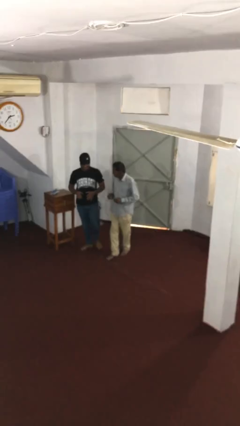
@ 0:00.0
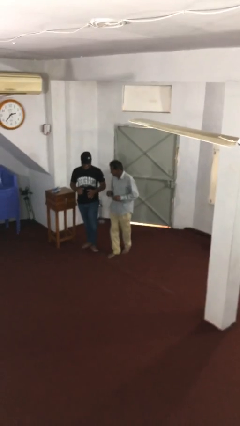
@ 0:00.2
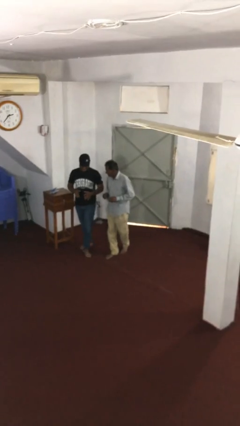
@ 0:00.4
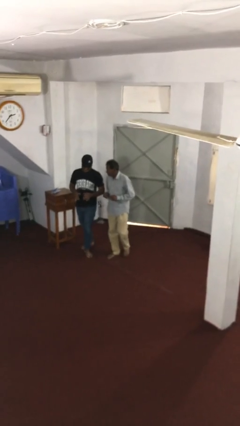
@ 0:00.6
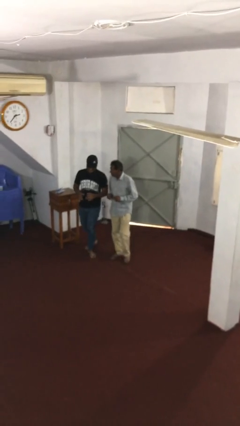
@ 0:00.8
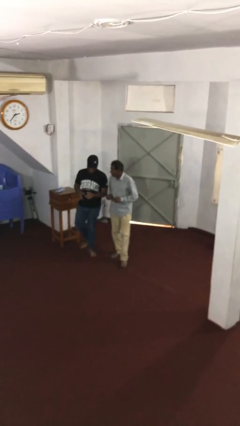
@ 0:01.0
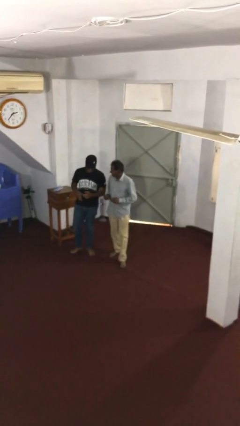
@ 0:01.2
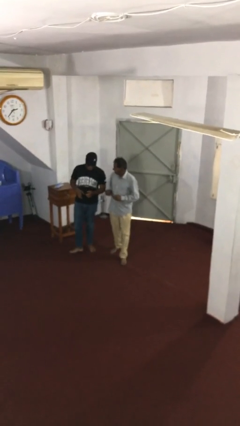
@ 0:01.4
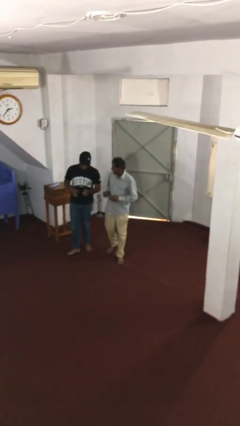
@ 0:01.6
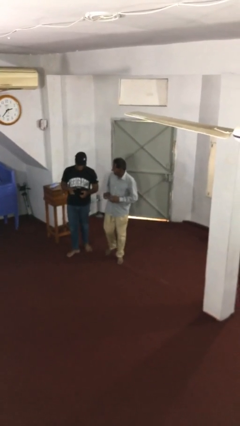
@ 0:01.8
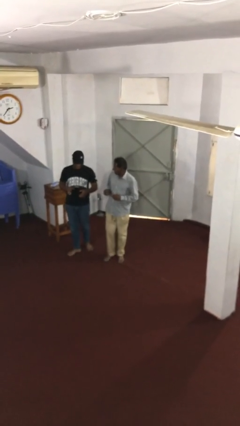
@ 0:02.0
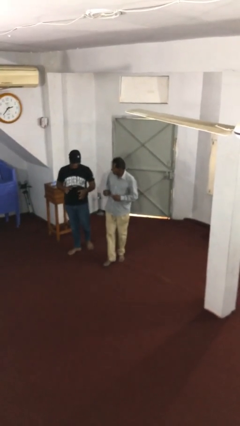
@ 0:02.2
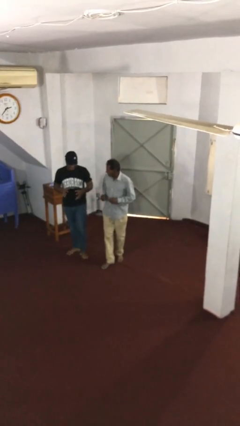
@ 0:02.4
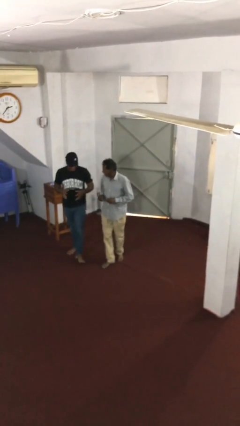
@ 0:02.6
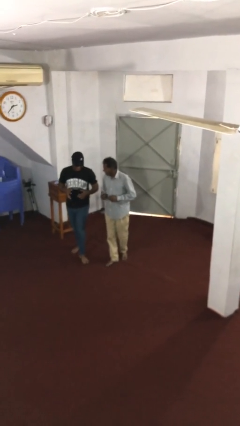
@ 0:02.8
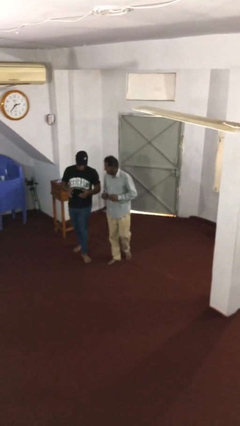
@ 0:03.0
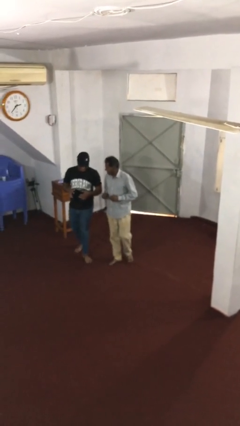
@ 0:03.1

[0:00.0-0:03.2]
person talks to person

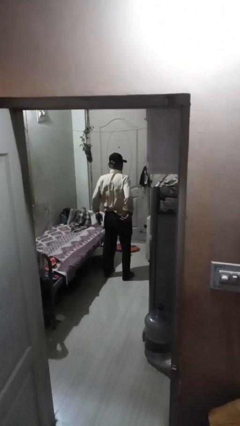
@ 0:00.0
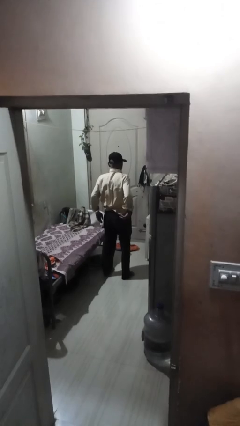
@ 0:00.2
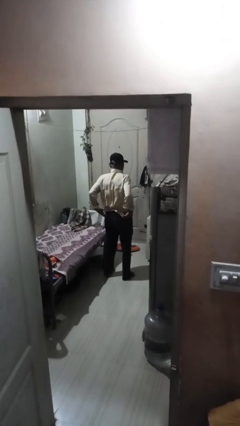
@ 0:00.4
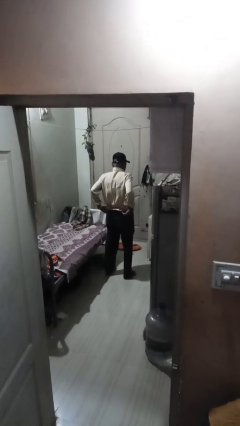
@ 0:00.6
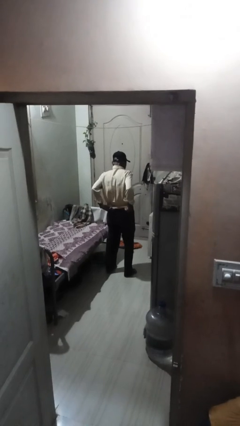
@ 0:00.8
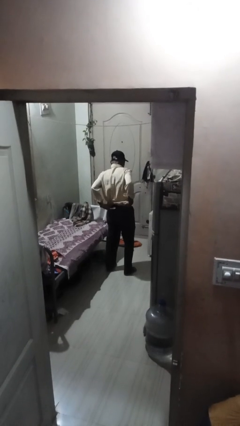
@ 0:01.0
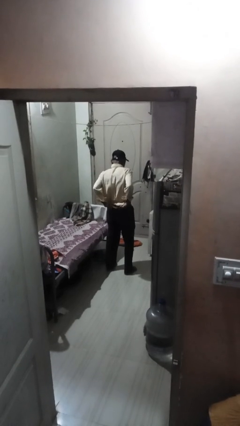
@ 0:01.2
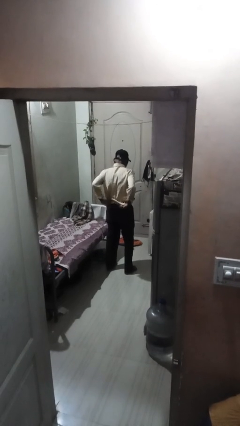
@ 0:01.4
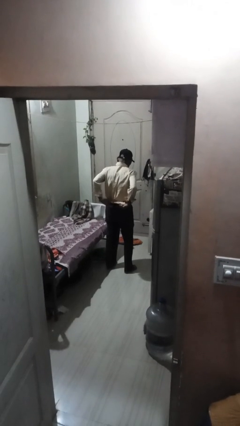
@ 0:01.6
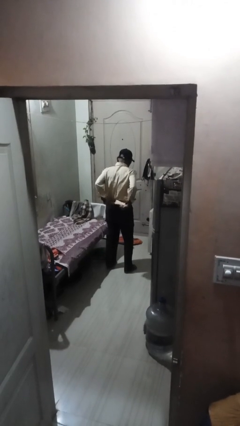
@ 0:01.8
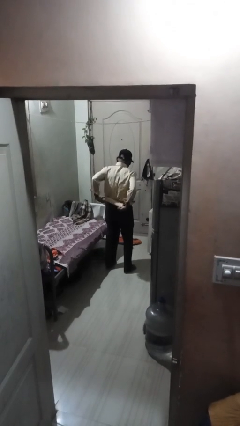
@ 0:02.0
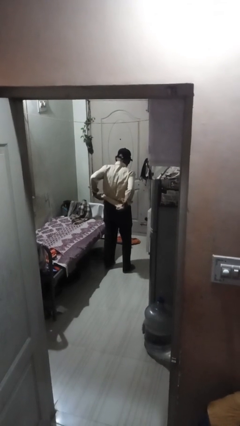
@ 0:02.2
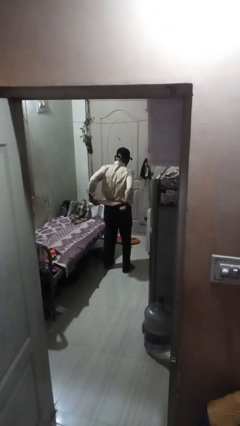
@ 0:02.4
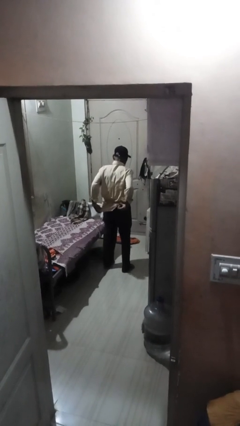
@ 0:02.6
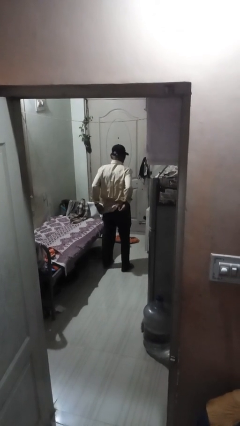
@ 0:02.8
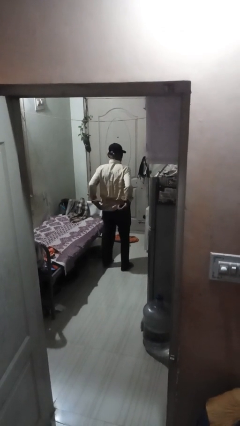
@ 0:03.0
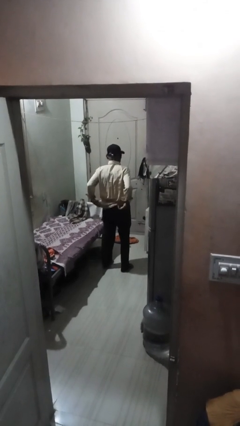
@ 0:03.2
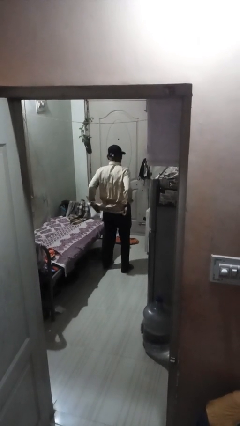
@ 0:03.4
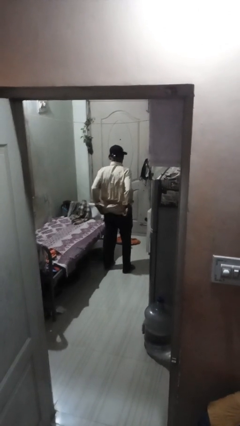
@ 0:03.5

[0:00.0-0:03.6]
person untucks shirt

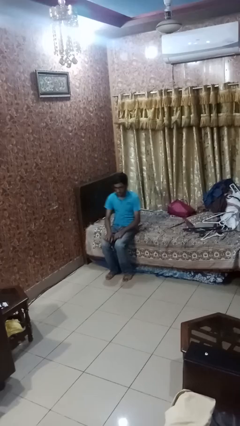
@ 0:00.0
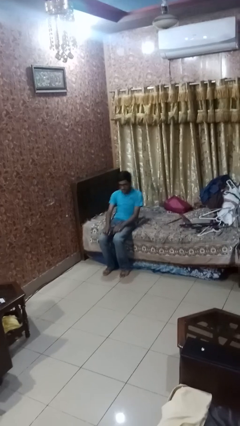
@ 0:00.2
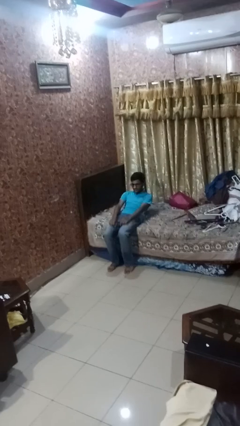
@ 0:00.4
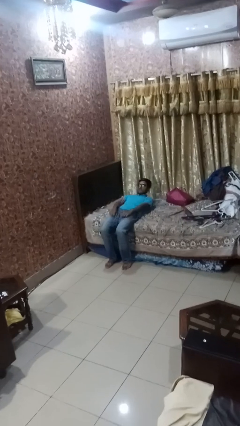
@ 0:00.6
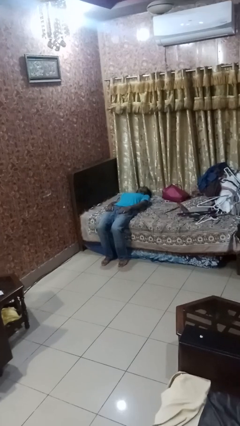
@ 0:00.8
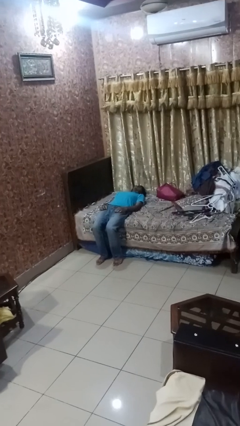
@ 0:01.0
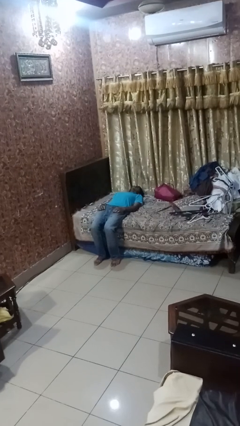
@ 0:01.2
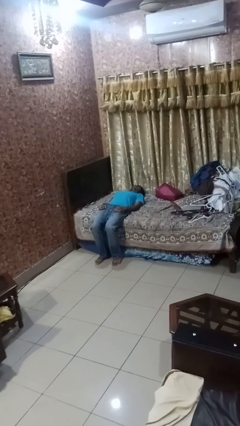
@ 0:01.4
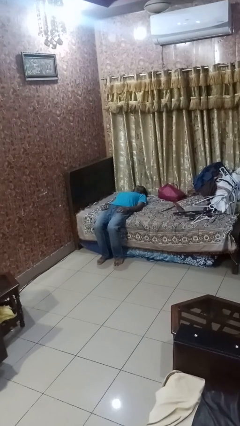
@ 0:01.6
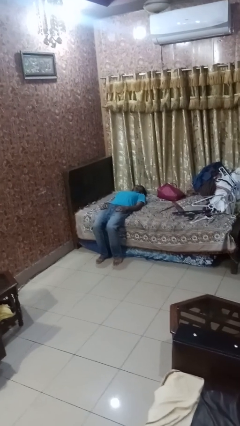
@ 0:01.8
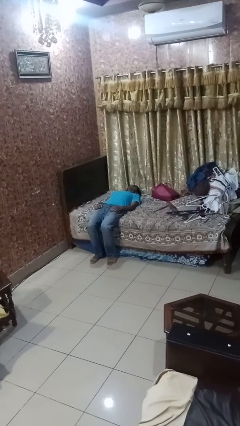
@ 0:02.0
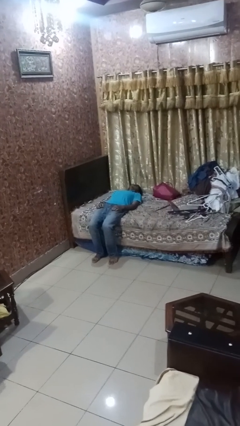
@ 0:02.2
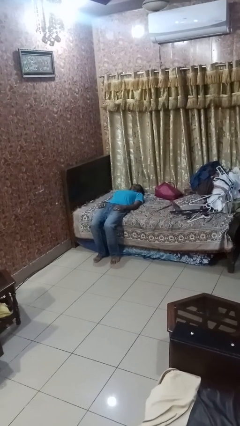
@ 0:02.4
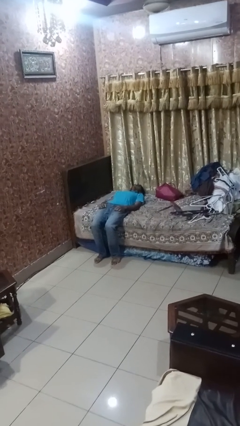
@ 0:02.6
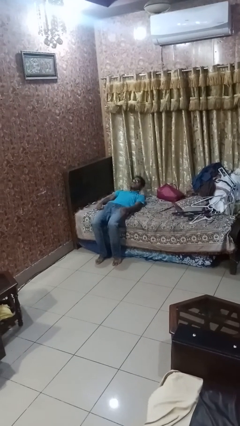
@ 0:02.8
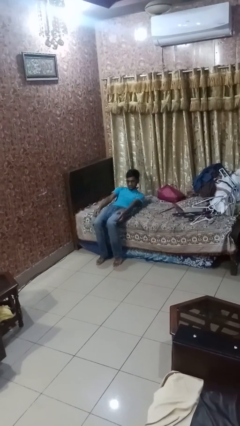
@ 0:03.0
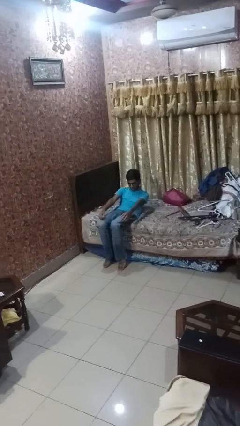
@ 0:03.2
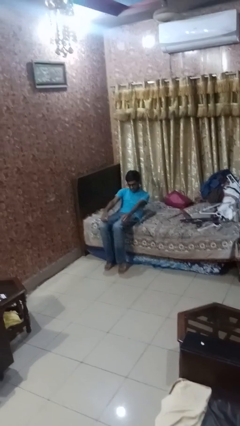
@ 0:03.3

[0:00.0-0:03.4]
person lies down on bed

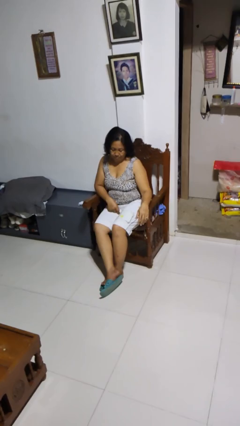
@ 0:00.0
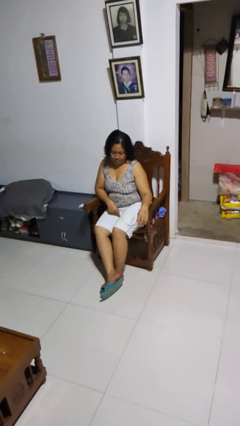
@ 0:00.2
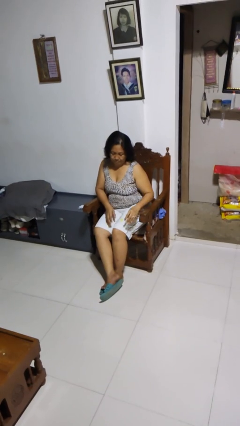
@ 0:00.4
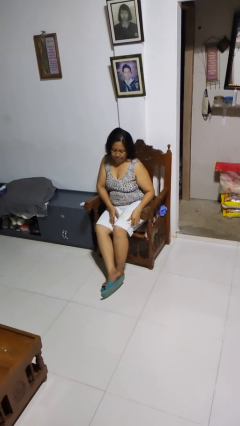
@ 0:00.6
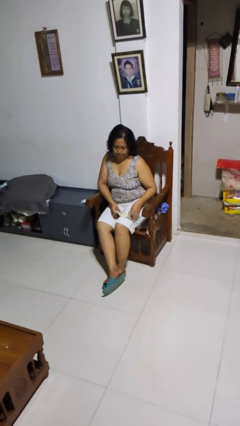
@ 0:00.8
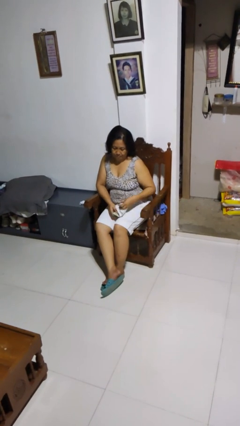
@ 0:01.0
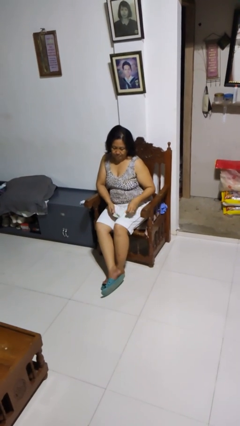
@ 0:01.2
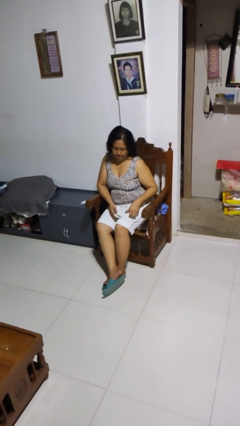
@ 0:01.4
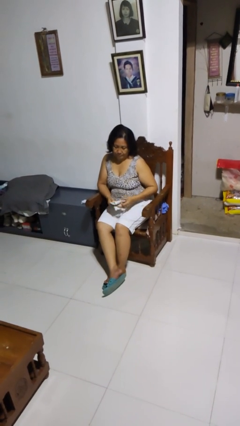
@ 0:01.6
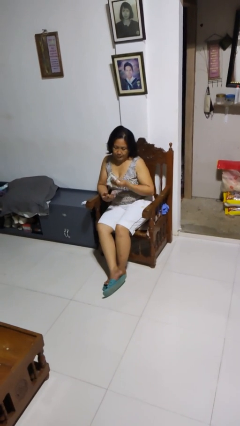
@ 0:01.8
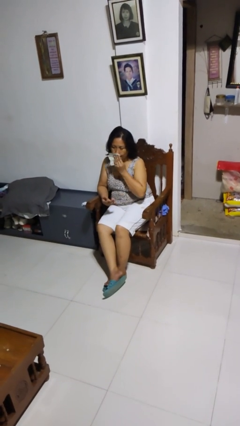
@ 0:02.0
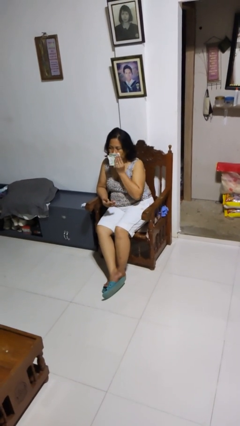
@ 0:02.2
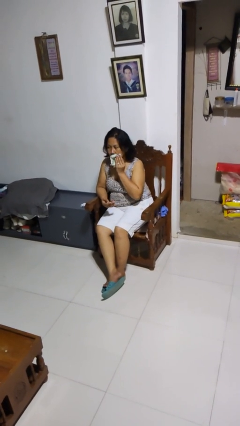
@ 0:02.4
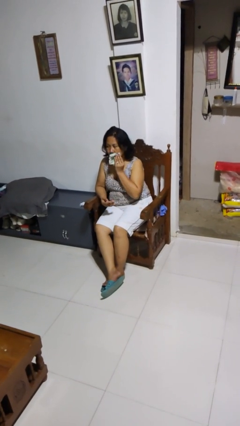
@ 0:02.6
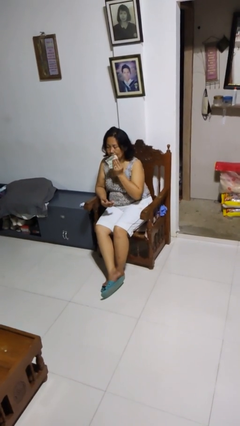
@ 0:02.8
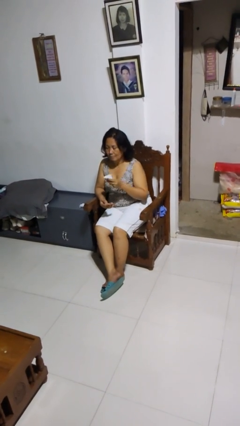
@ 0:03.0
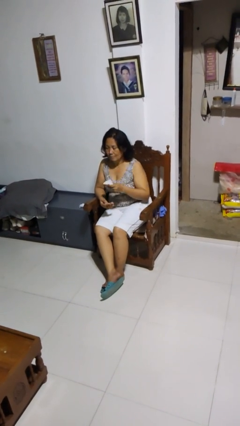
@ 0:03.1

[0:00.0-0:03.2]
person wipes mouth with napkin

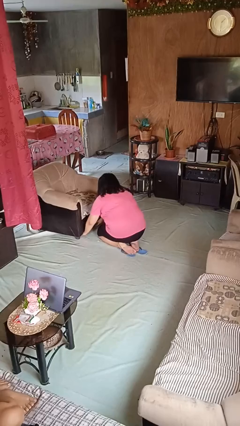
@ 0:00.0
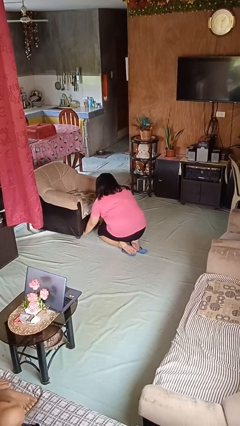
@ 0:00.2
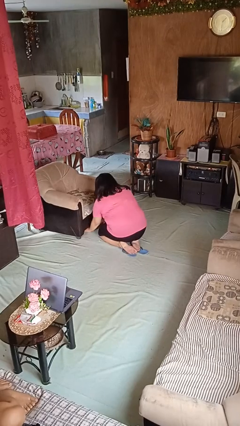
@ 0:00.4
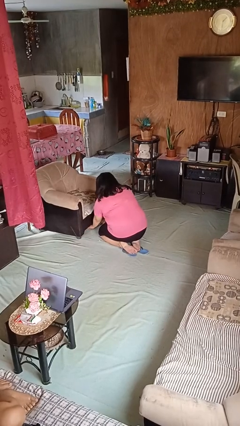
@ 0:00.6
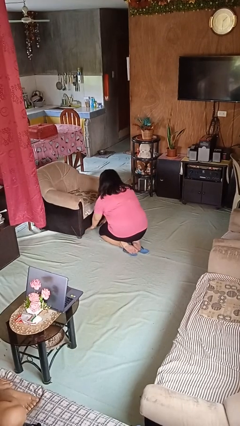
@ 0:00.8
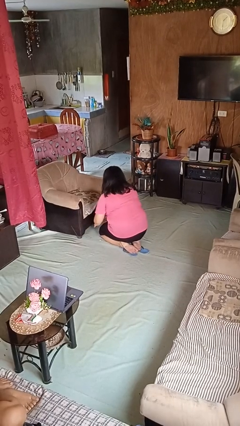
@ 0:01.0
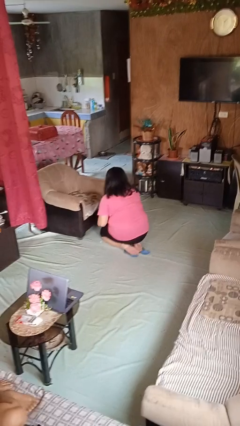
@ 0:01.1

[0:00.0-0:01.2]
person searches under couch

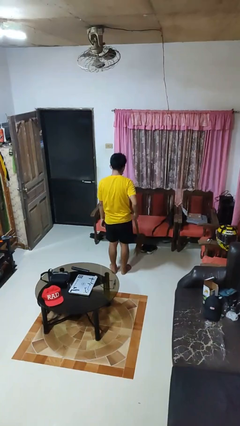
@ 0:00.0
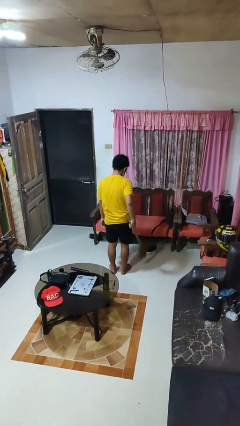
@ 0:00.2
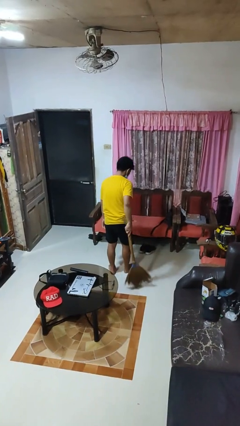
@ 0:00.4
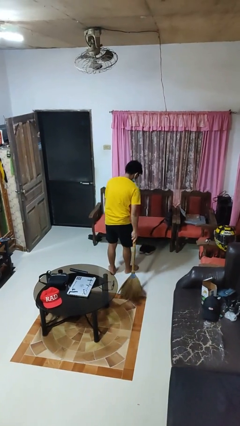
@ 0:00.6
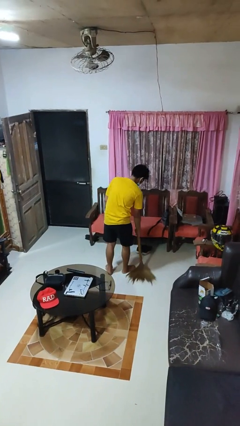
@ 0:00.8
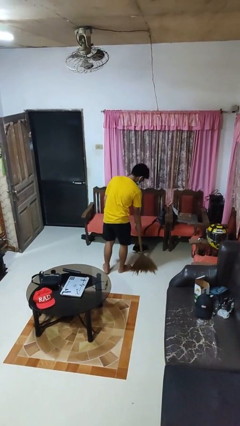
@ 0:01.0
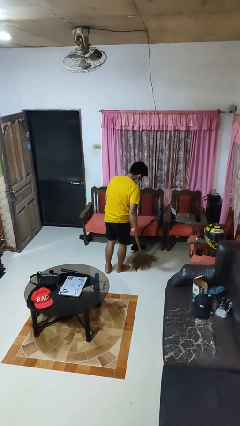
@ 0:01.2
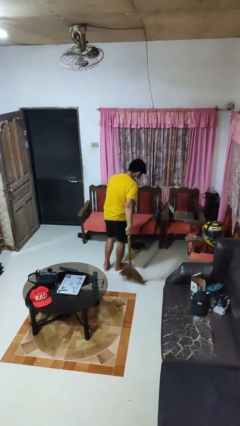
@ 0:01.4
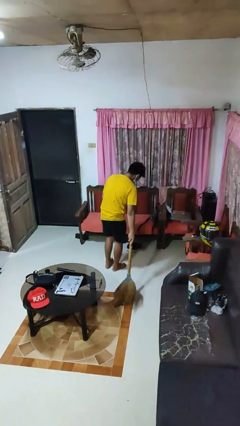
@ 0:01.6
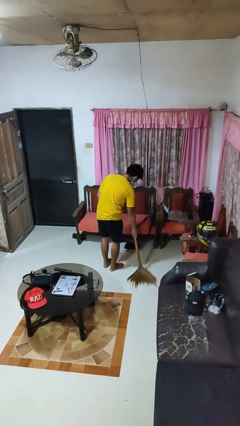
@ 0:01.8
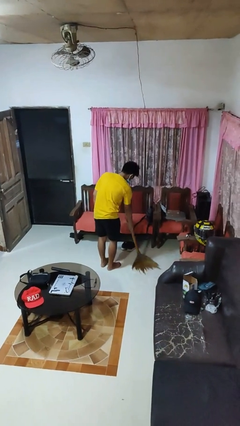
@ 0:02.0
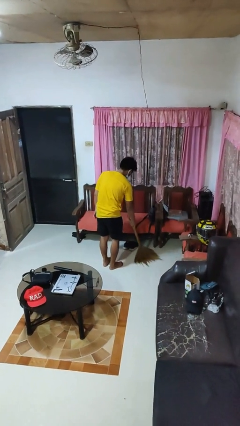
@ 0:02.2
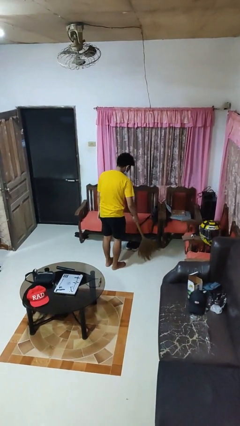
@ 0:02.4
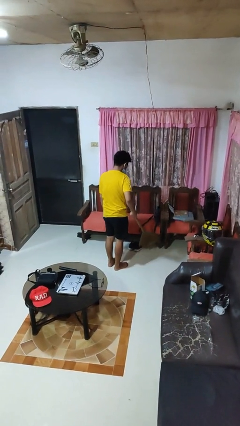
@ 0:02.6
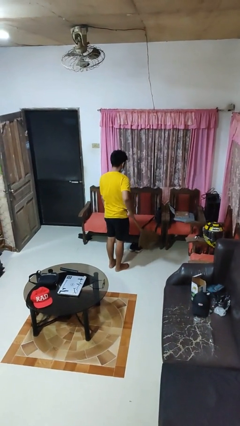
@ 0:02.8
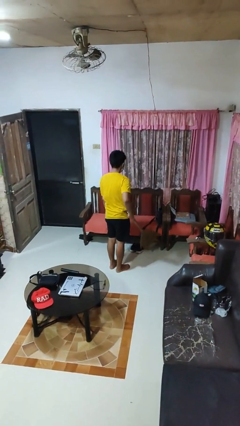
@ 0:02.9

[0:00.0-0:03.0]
person sweeps floor
